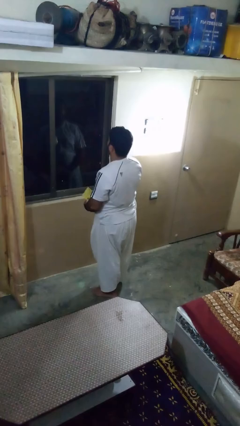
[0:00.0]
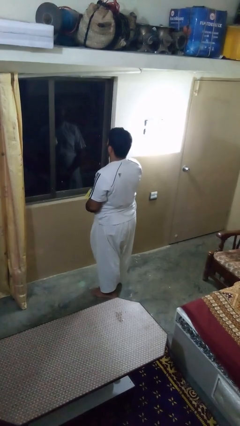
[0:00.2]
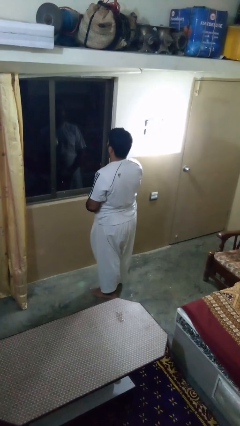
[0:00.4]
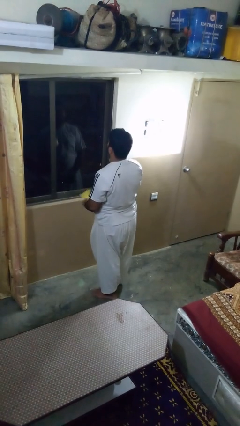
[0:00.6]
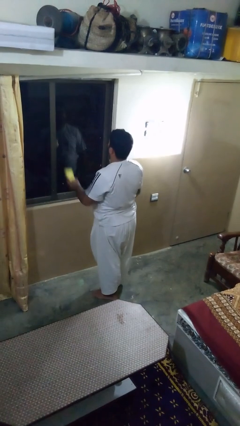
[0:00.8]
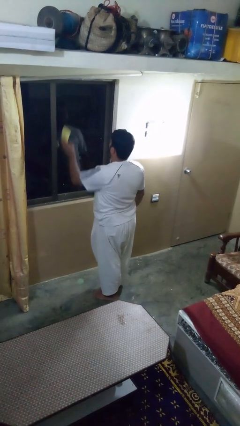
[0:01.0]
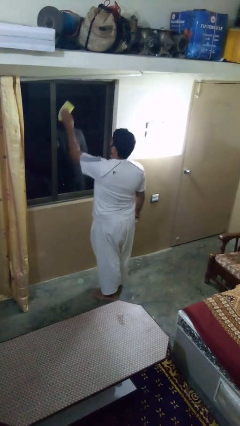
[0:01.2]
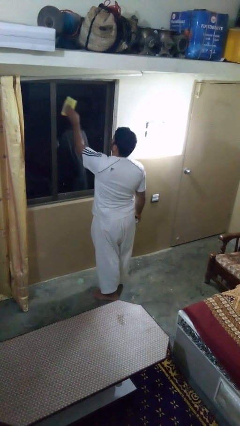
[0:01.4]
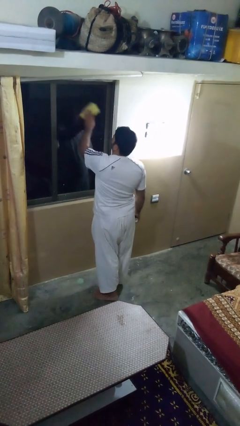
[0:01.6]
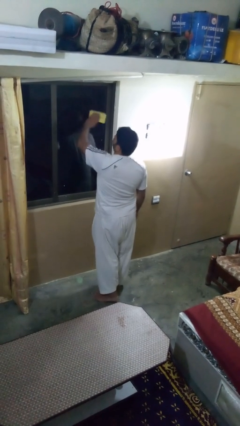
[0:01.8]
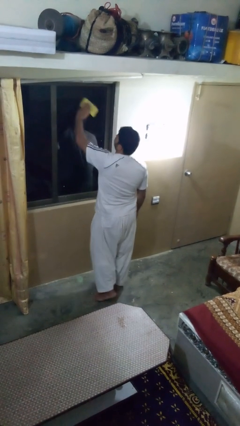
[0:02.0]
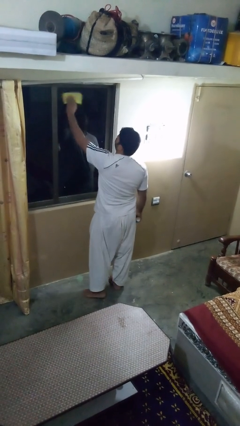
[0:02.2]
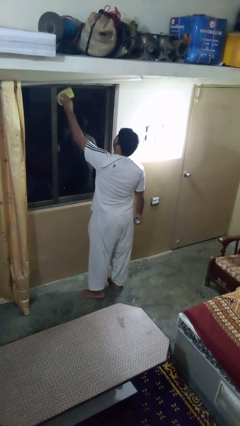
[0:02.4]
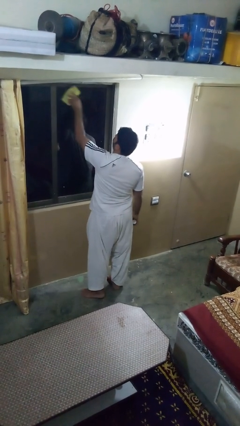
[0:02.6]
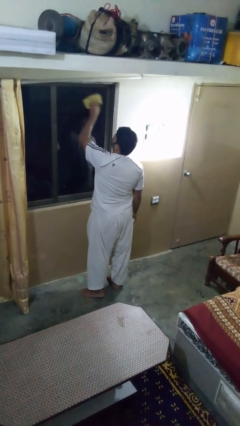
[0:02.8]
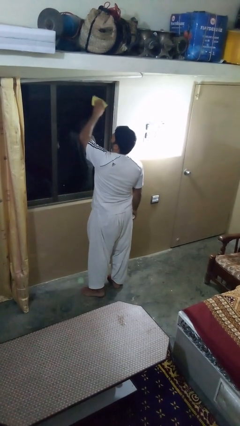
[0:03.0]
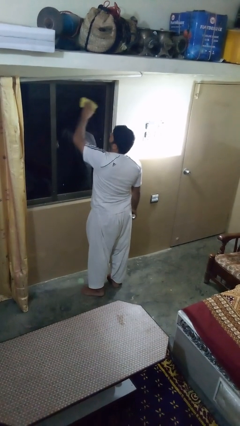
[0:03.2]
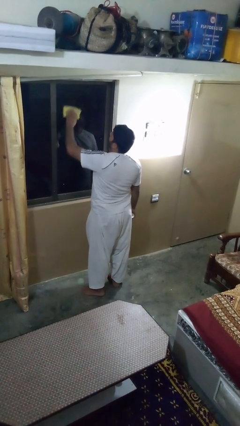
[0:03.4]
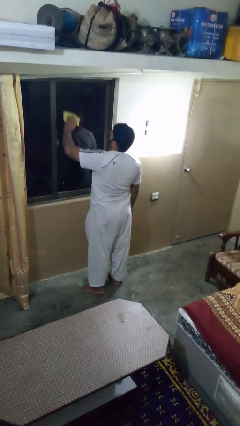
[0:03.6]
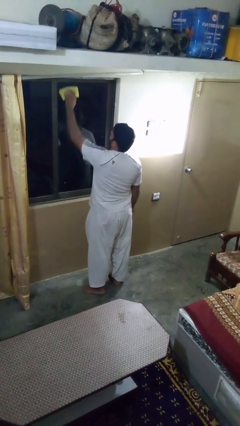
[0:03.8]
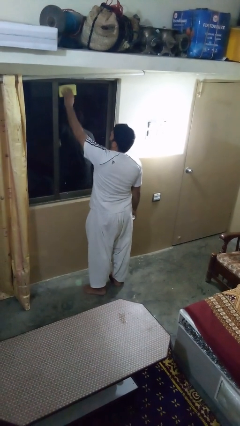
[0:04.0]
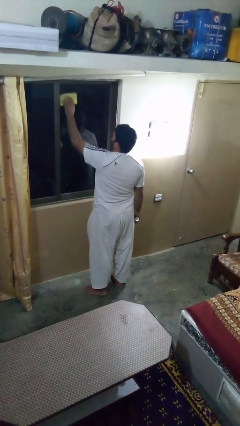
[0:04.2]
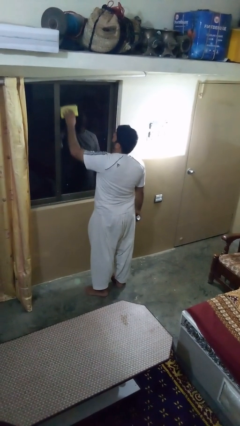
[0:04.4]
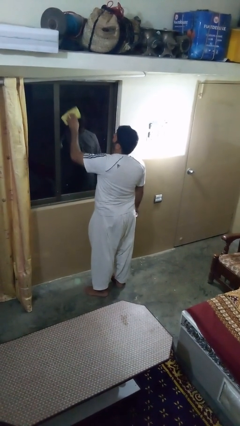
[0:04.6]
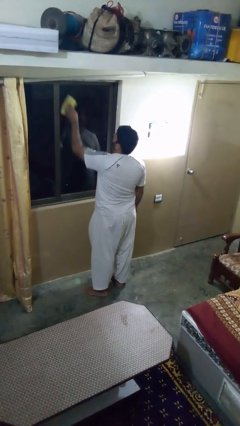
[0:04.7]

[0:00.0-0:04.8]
person washes window

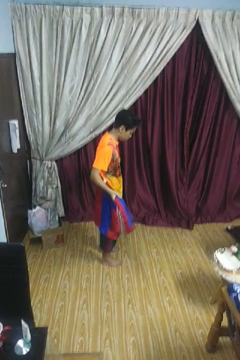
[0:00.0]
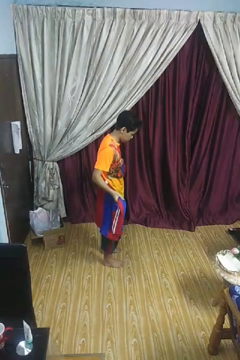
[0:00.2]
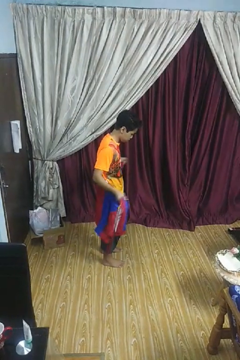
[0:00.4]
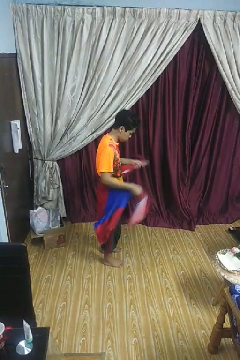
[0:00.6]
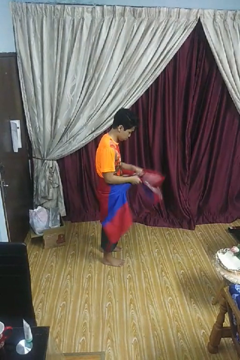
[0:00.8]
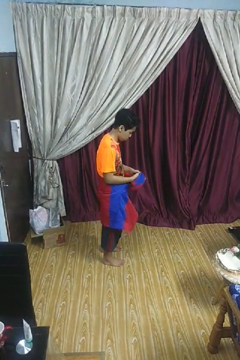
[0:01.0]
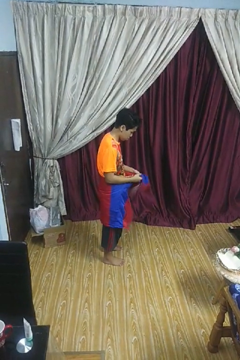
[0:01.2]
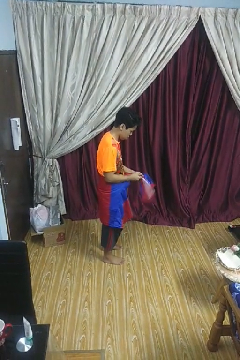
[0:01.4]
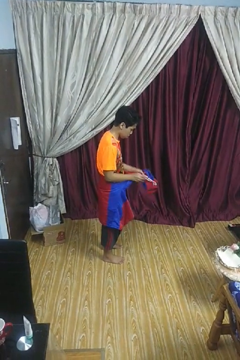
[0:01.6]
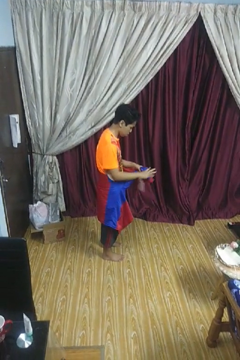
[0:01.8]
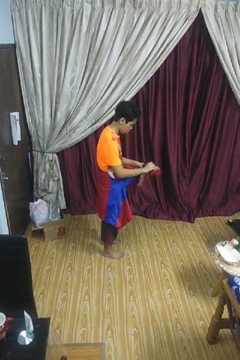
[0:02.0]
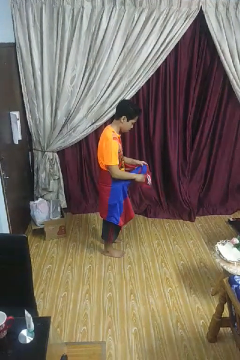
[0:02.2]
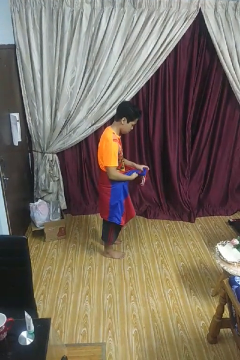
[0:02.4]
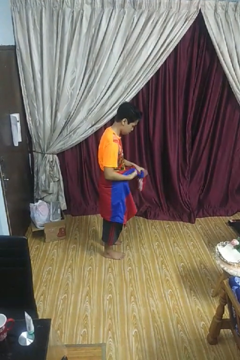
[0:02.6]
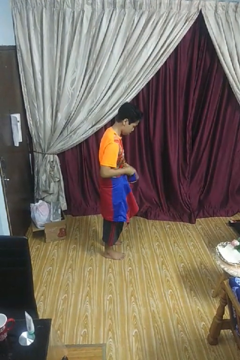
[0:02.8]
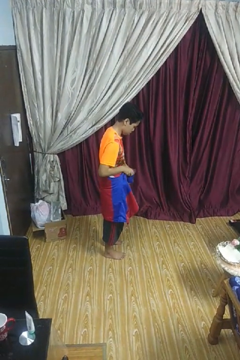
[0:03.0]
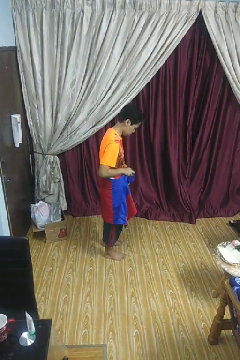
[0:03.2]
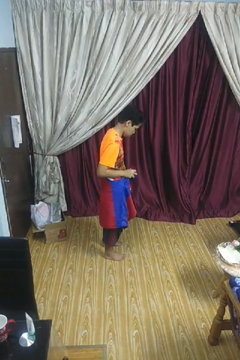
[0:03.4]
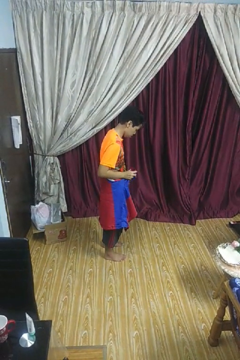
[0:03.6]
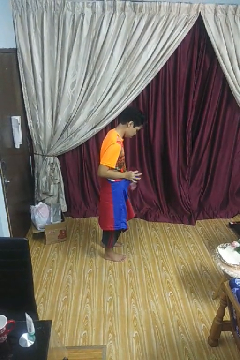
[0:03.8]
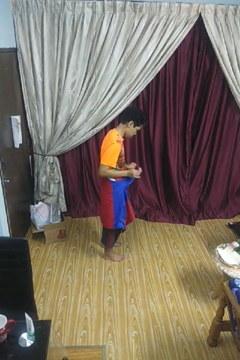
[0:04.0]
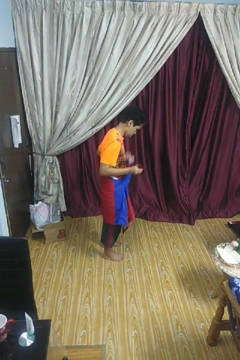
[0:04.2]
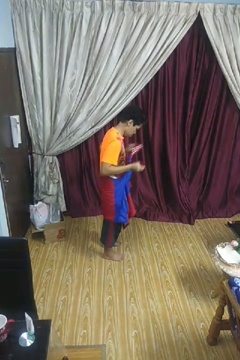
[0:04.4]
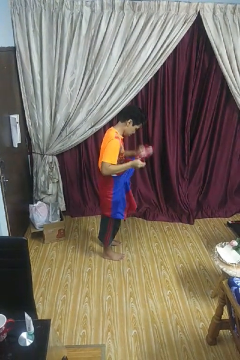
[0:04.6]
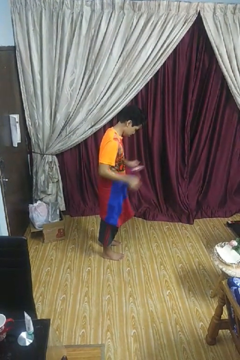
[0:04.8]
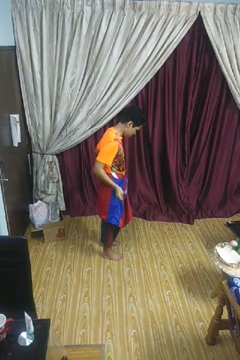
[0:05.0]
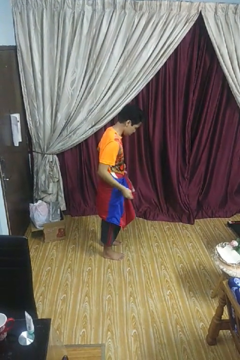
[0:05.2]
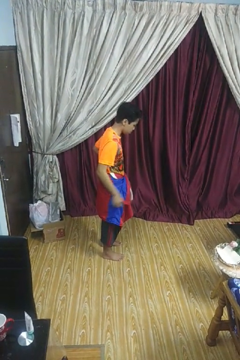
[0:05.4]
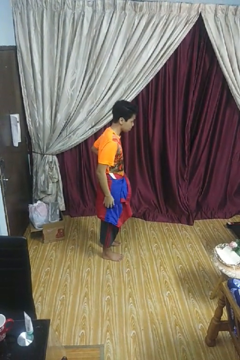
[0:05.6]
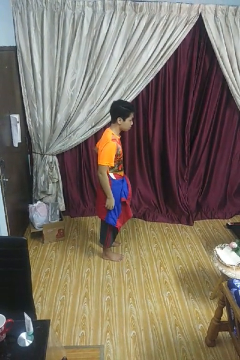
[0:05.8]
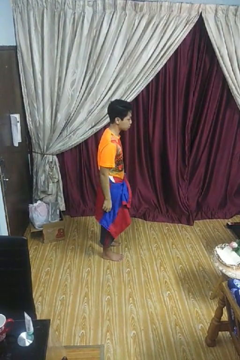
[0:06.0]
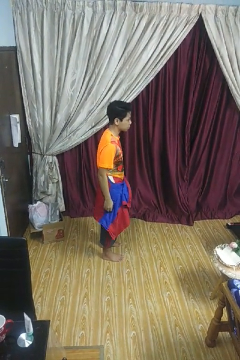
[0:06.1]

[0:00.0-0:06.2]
person ties jacket around waist

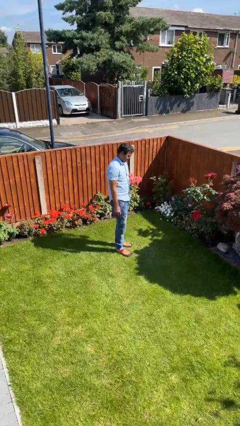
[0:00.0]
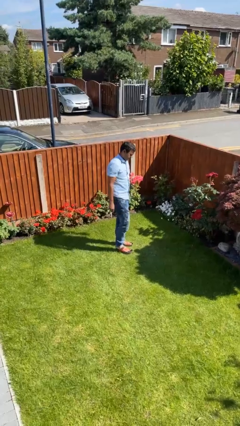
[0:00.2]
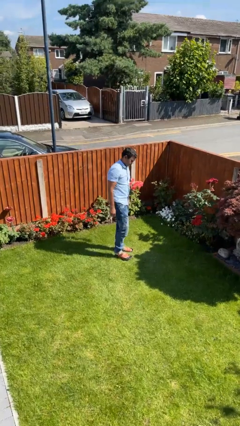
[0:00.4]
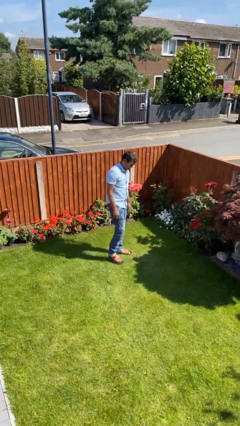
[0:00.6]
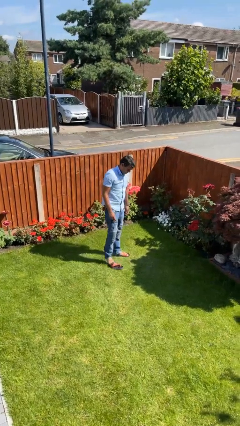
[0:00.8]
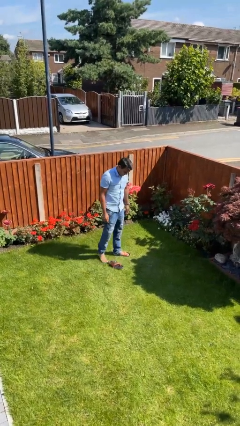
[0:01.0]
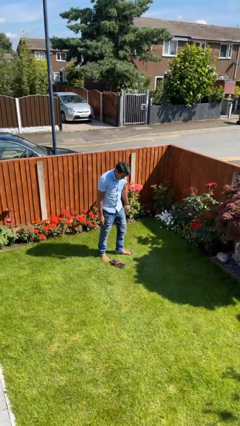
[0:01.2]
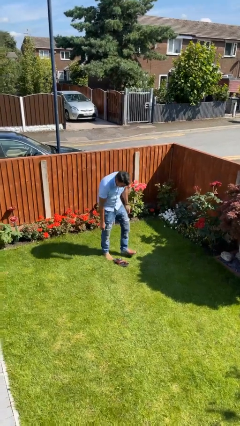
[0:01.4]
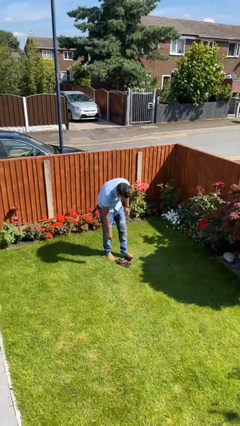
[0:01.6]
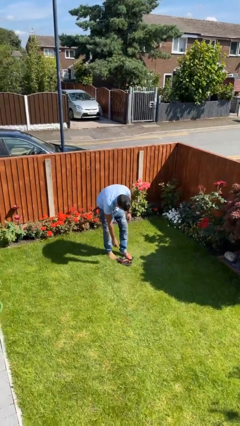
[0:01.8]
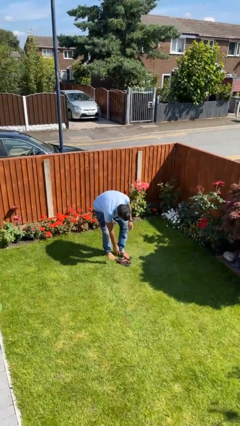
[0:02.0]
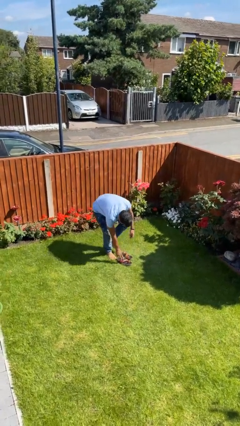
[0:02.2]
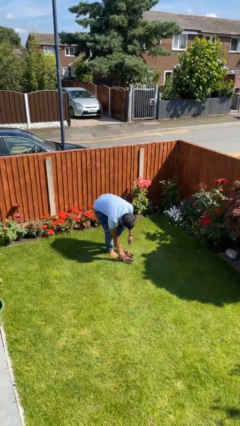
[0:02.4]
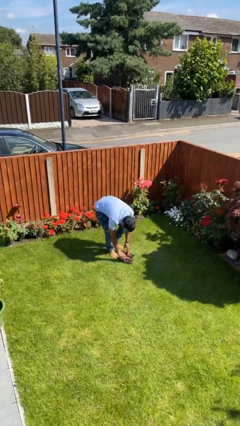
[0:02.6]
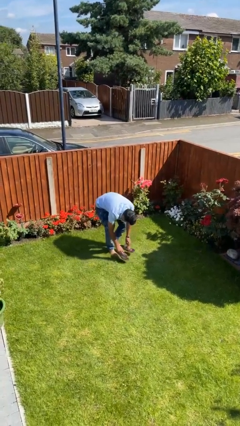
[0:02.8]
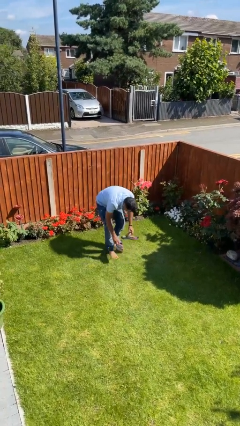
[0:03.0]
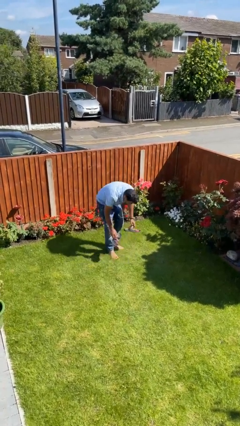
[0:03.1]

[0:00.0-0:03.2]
person takes off shoes

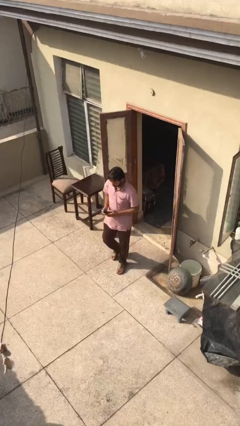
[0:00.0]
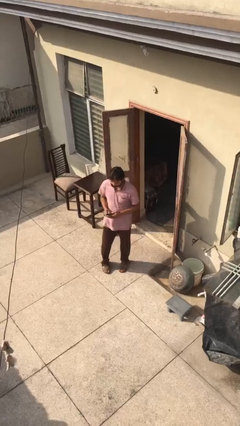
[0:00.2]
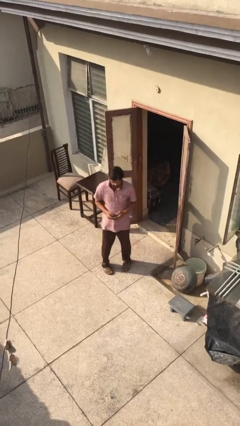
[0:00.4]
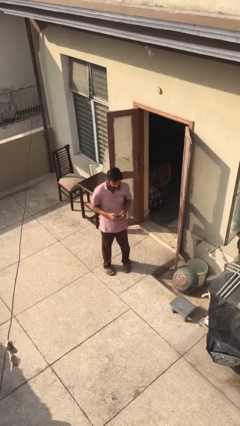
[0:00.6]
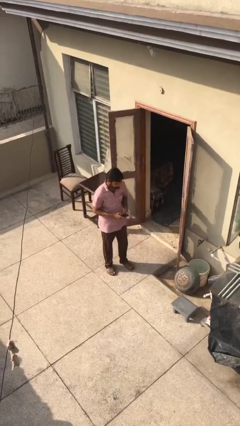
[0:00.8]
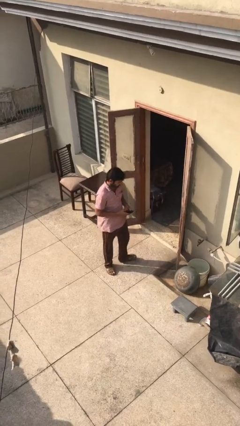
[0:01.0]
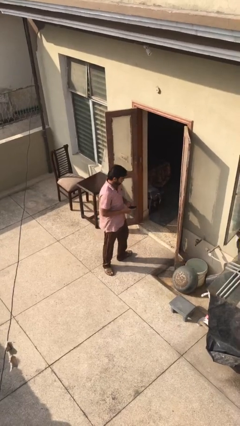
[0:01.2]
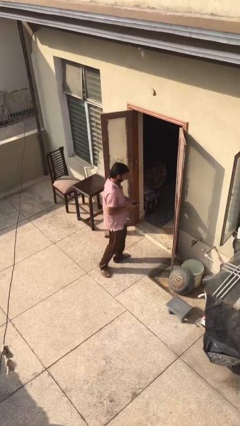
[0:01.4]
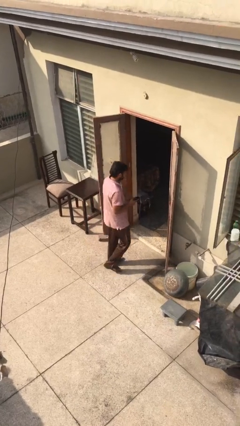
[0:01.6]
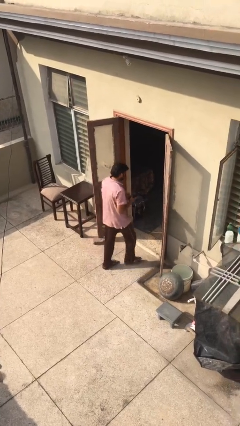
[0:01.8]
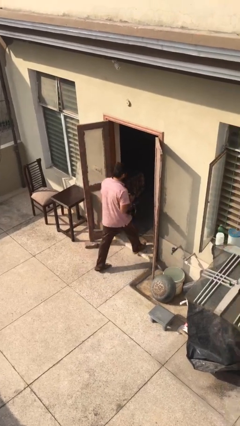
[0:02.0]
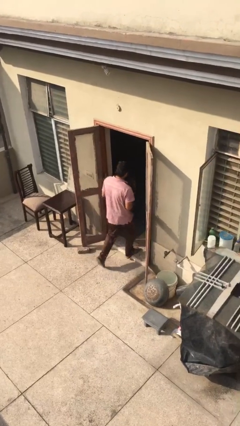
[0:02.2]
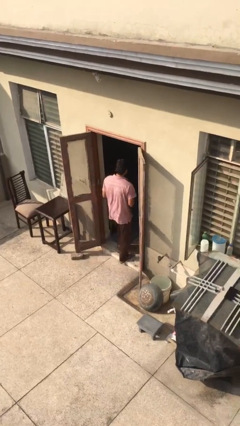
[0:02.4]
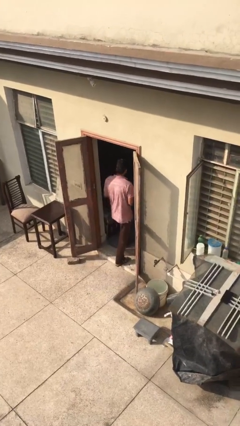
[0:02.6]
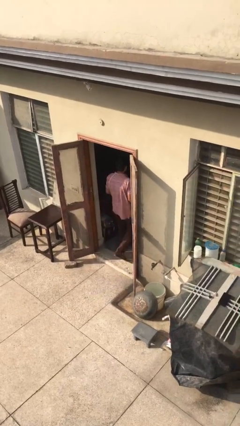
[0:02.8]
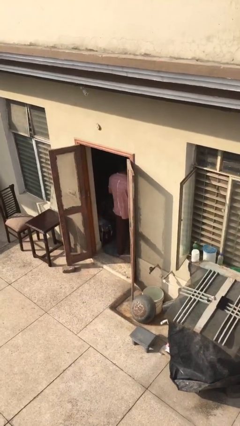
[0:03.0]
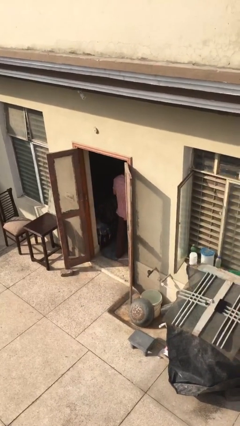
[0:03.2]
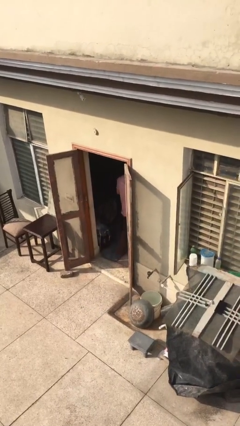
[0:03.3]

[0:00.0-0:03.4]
person exits scene through structure

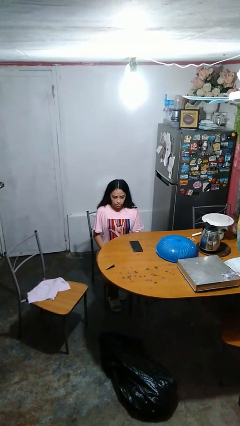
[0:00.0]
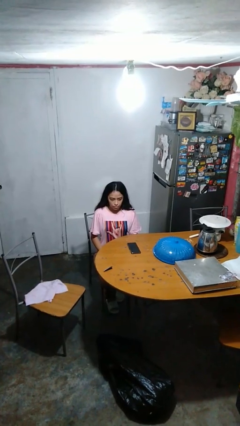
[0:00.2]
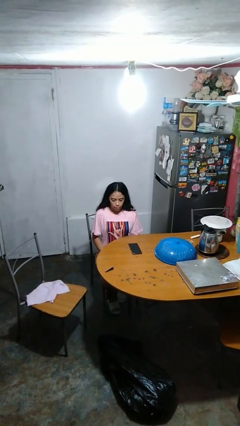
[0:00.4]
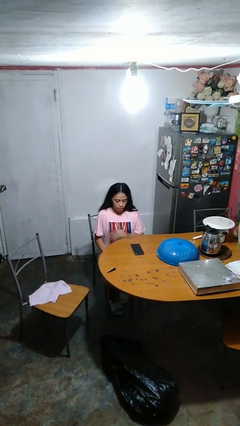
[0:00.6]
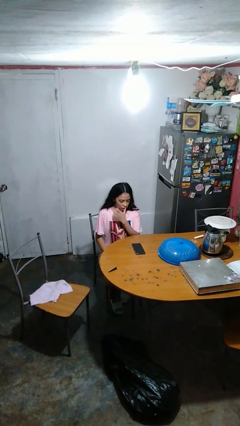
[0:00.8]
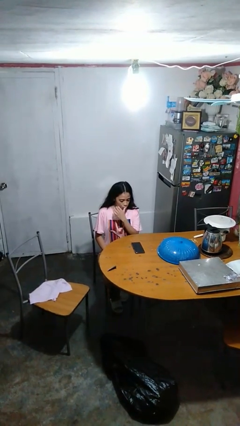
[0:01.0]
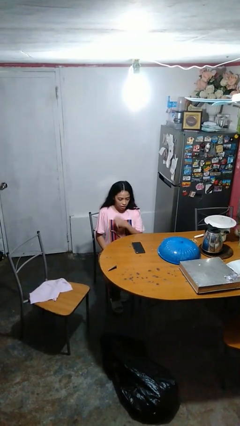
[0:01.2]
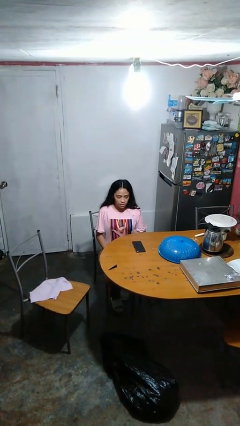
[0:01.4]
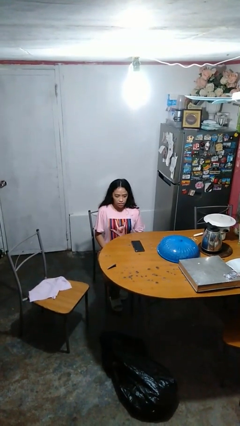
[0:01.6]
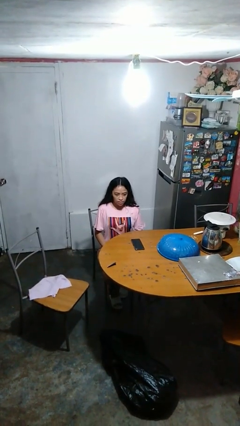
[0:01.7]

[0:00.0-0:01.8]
person licks fingers
